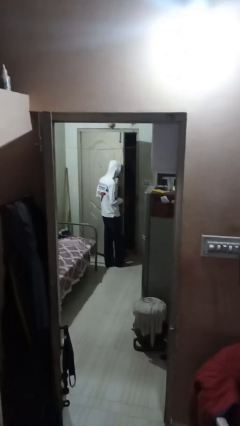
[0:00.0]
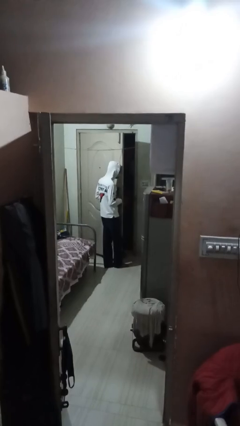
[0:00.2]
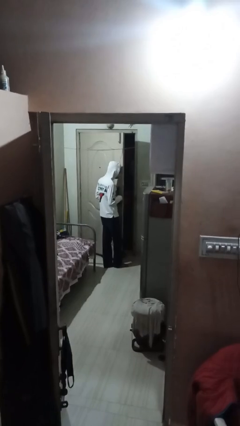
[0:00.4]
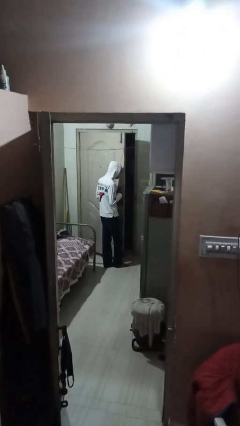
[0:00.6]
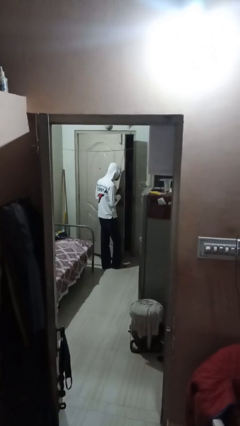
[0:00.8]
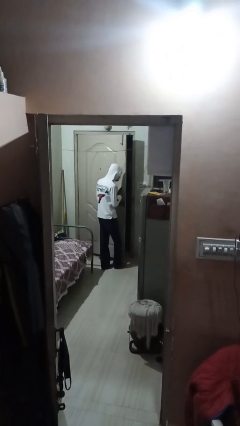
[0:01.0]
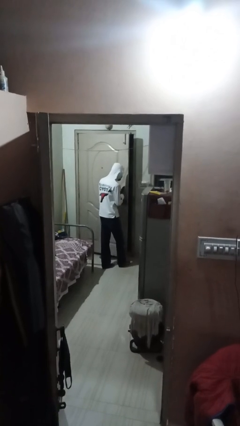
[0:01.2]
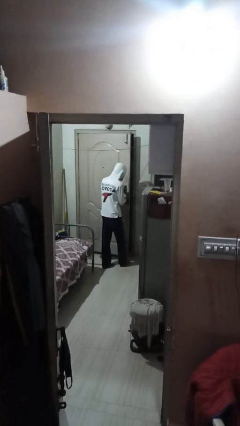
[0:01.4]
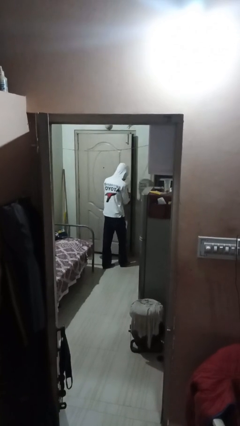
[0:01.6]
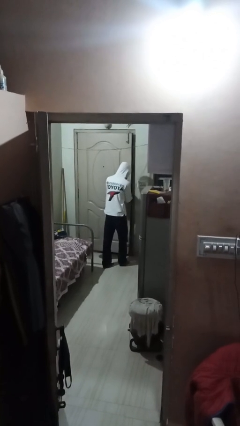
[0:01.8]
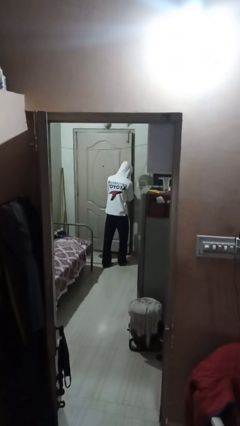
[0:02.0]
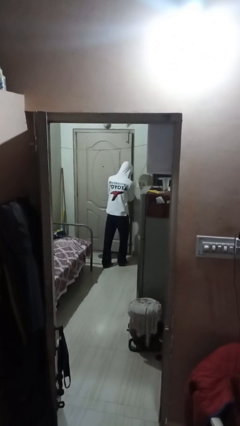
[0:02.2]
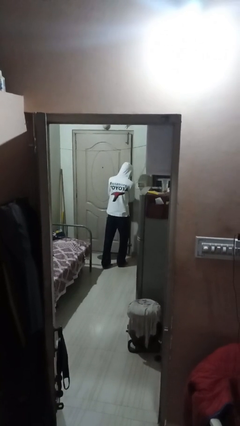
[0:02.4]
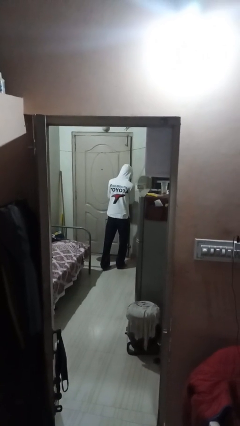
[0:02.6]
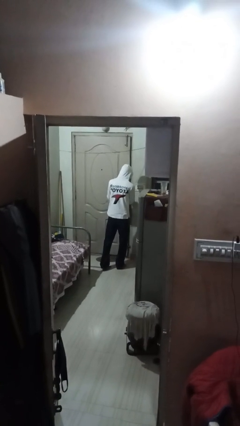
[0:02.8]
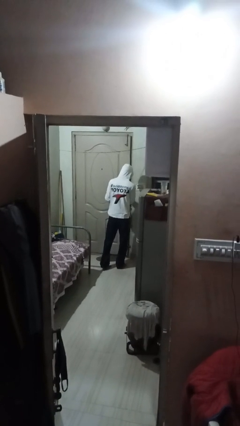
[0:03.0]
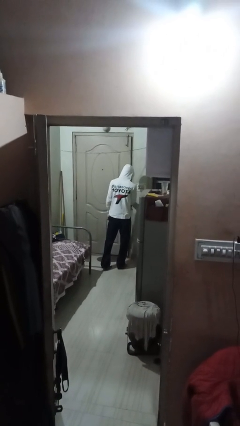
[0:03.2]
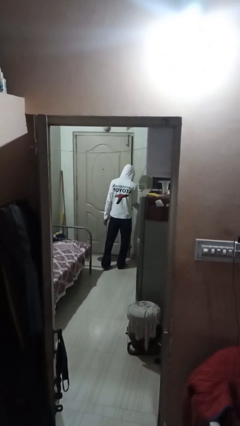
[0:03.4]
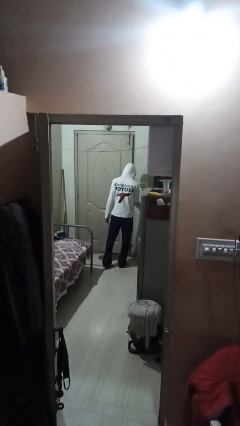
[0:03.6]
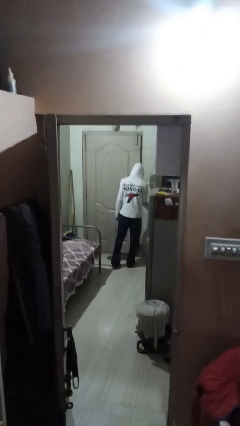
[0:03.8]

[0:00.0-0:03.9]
person closes facility door

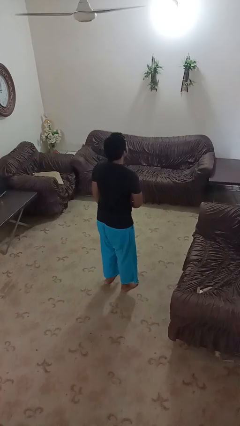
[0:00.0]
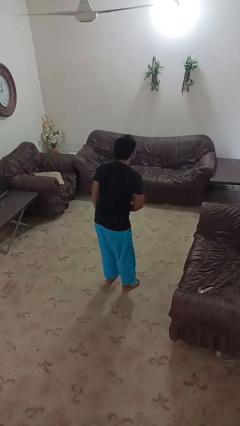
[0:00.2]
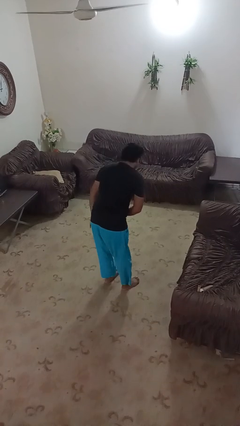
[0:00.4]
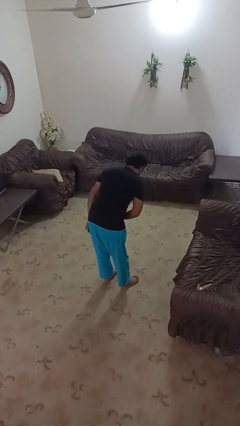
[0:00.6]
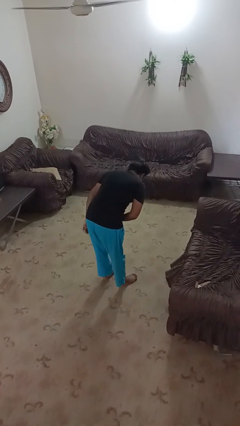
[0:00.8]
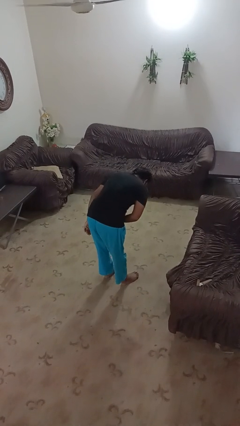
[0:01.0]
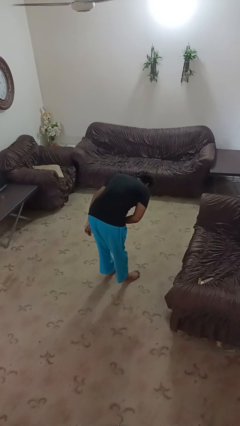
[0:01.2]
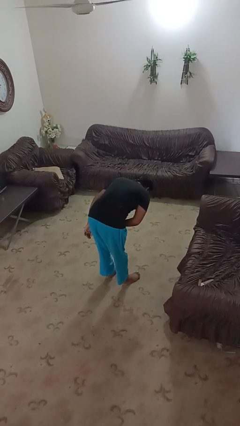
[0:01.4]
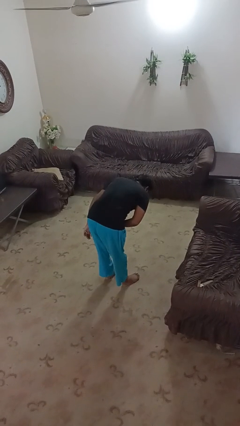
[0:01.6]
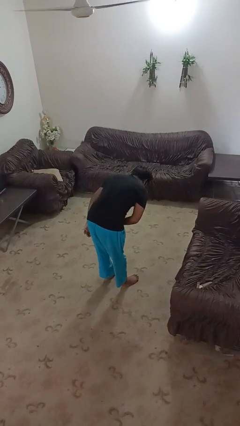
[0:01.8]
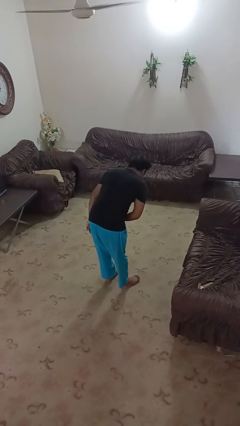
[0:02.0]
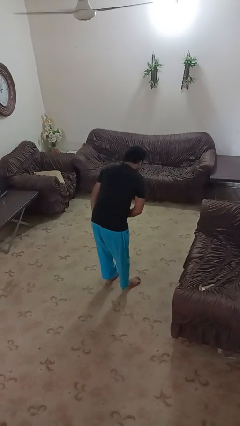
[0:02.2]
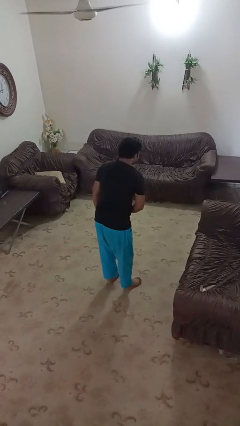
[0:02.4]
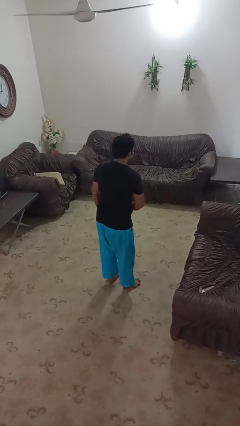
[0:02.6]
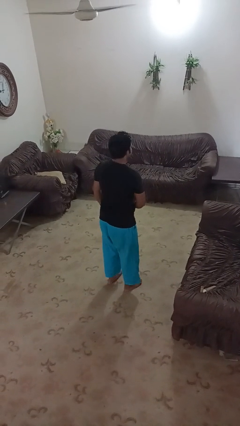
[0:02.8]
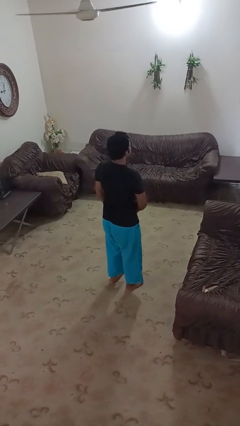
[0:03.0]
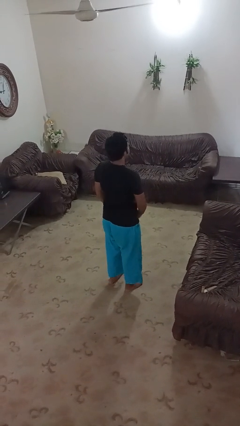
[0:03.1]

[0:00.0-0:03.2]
person bows

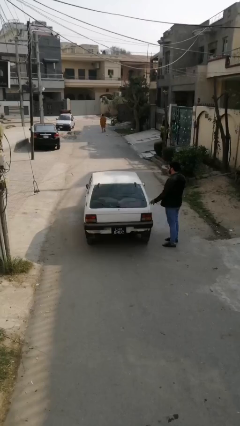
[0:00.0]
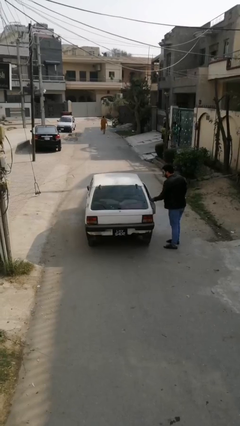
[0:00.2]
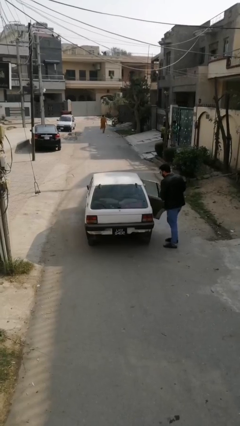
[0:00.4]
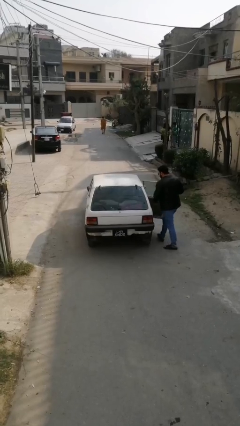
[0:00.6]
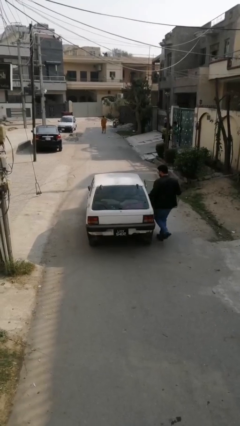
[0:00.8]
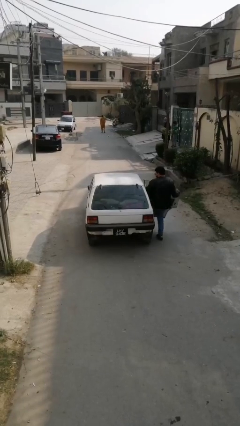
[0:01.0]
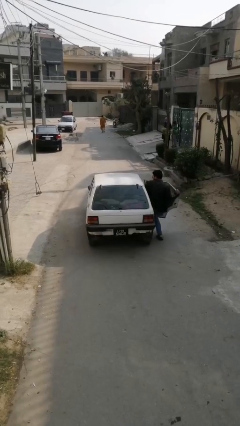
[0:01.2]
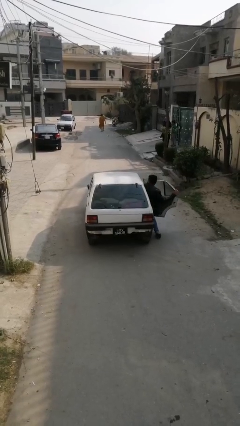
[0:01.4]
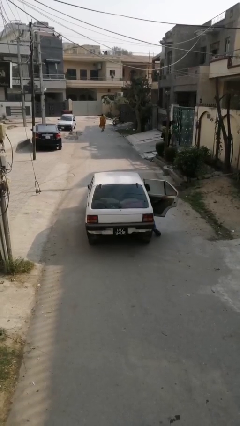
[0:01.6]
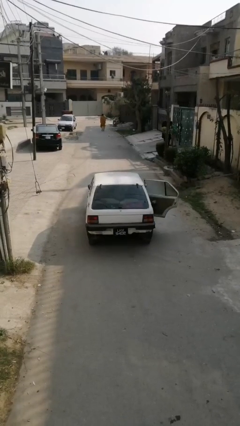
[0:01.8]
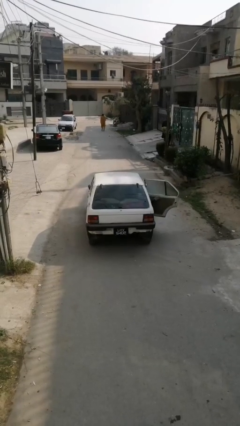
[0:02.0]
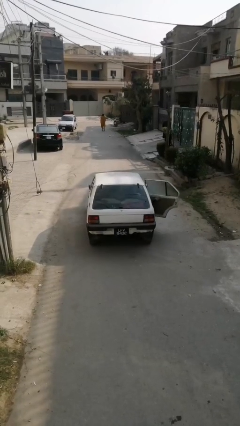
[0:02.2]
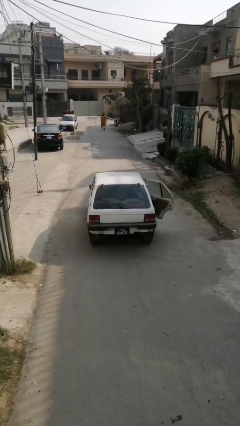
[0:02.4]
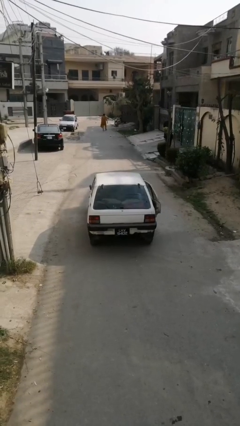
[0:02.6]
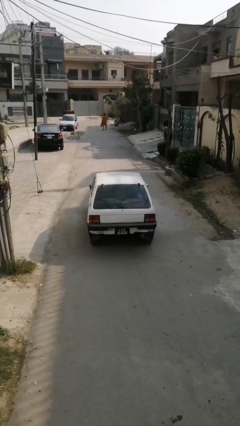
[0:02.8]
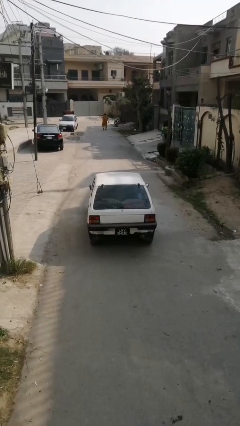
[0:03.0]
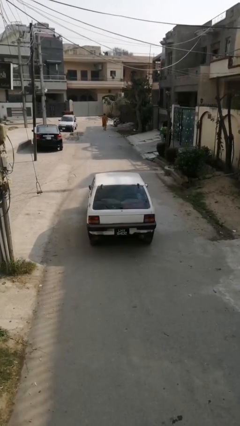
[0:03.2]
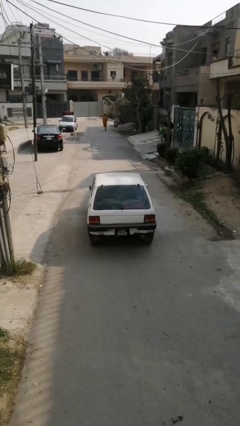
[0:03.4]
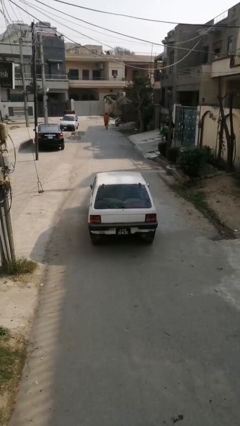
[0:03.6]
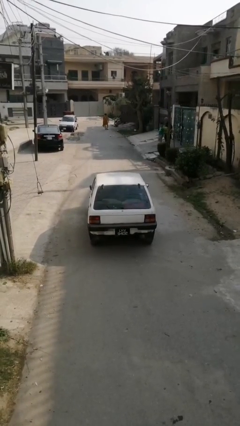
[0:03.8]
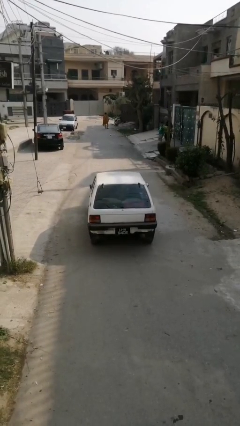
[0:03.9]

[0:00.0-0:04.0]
car picks up person

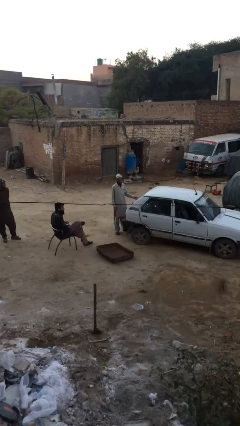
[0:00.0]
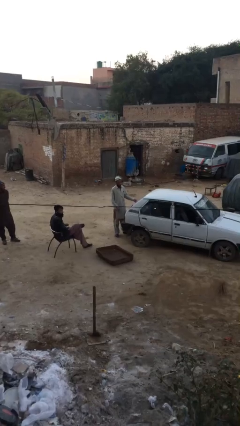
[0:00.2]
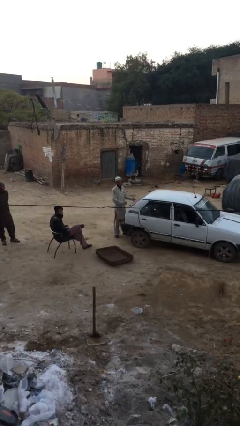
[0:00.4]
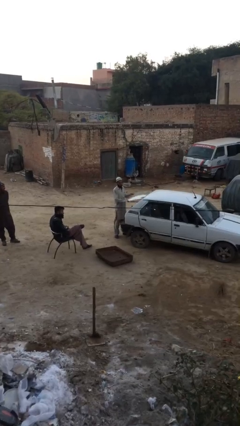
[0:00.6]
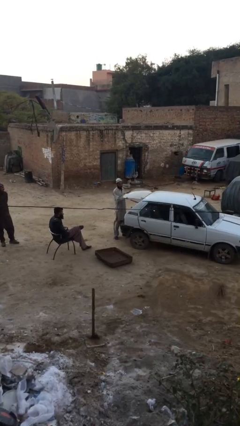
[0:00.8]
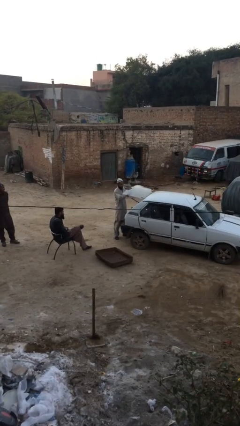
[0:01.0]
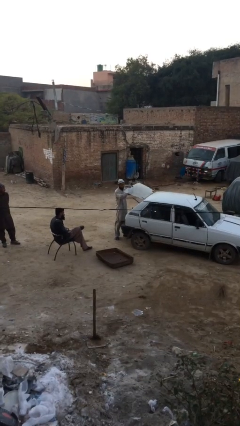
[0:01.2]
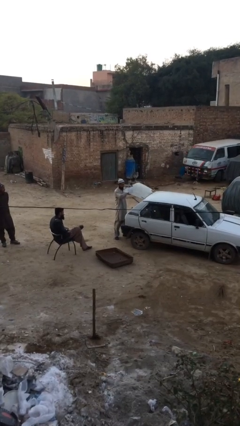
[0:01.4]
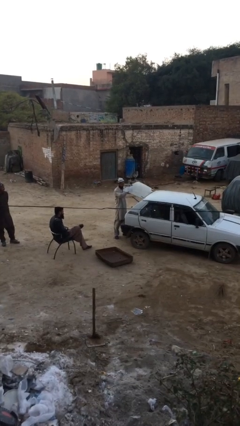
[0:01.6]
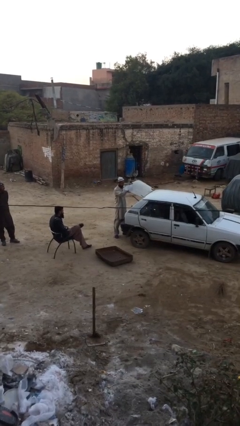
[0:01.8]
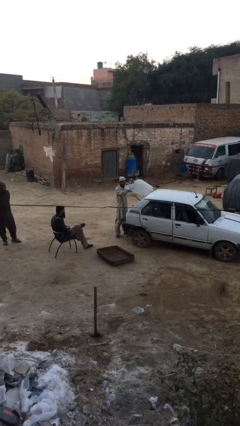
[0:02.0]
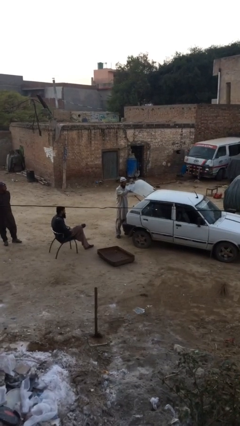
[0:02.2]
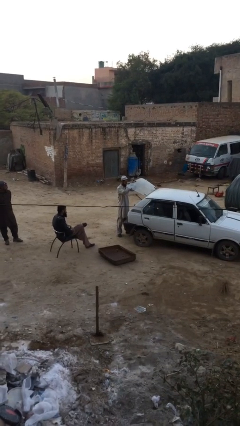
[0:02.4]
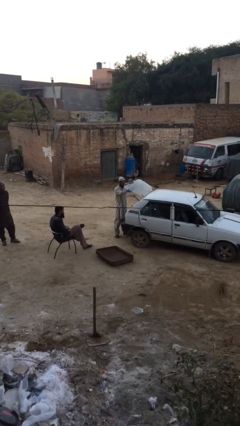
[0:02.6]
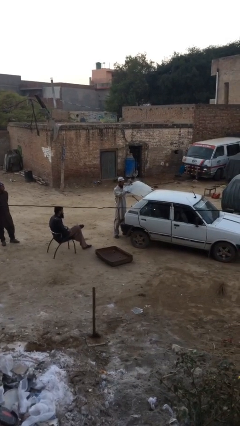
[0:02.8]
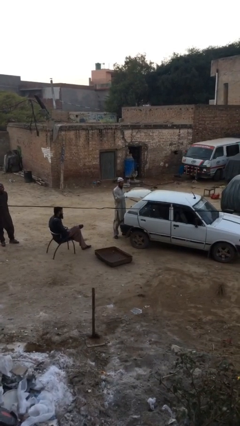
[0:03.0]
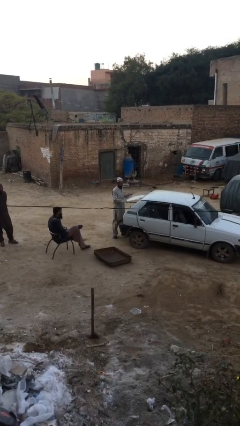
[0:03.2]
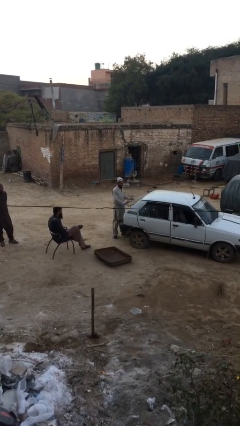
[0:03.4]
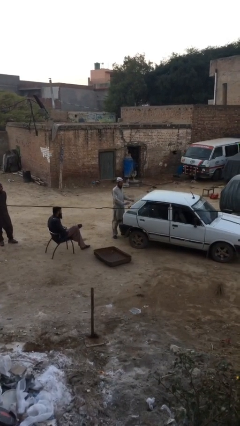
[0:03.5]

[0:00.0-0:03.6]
person opens car trunk

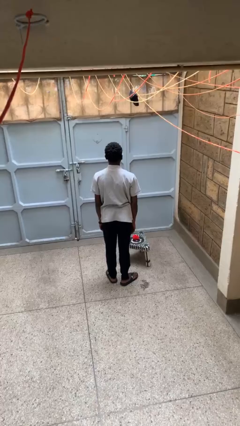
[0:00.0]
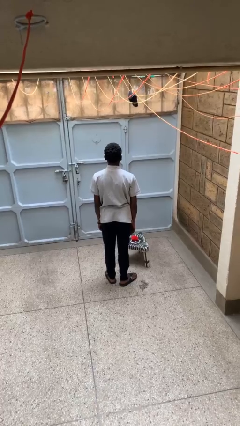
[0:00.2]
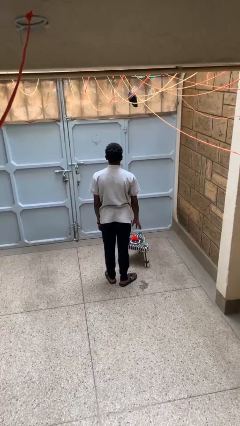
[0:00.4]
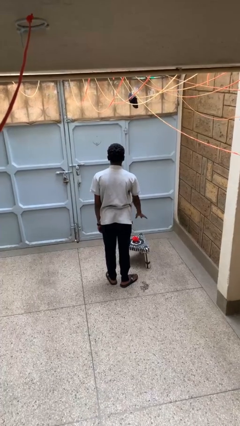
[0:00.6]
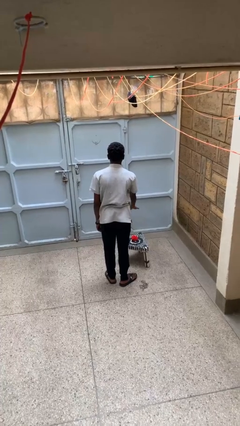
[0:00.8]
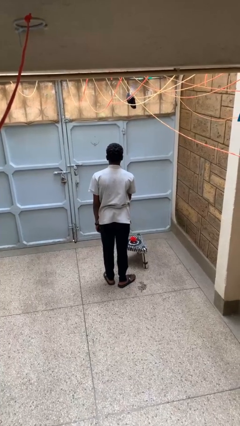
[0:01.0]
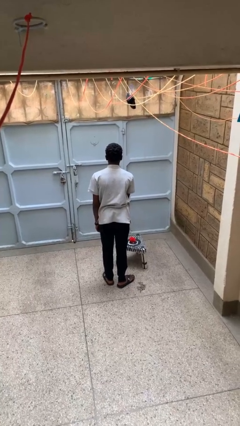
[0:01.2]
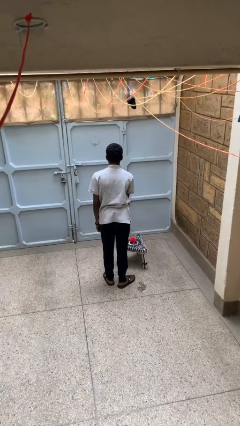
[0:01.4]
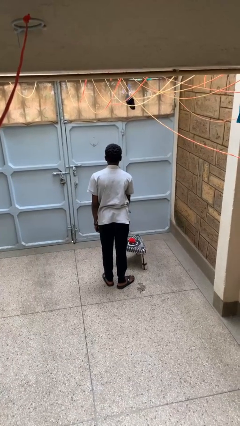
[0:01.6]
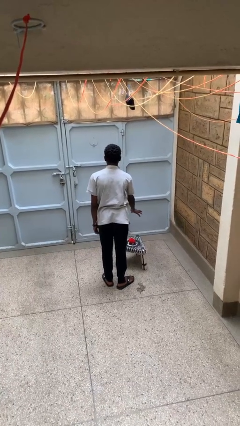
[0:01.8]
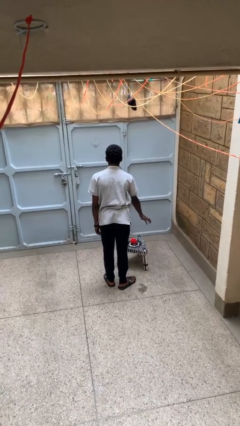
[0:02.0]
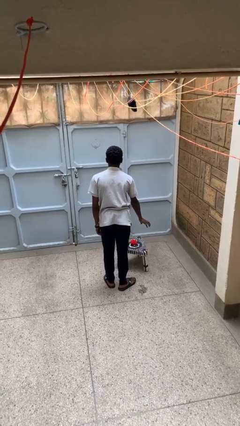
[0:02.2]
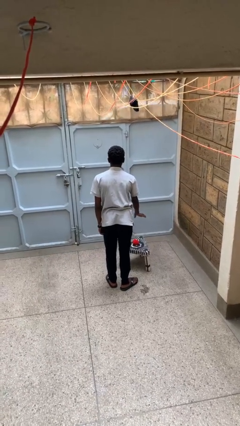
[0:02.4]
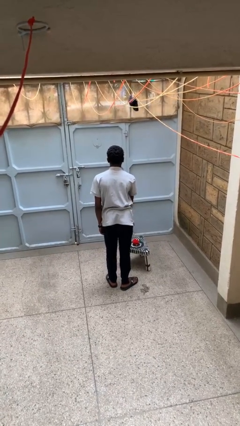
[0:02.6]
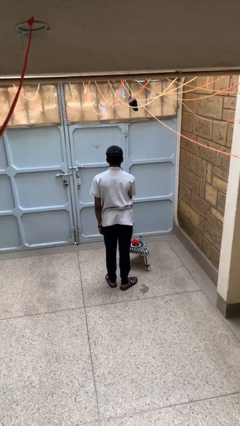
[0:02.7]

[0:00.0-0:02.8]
person waves hand over object

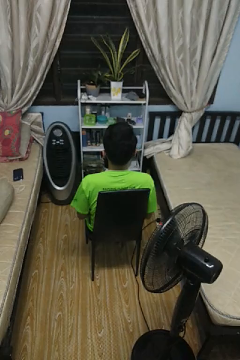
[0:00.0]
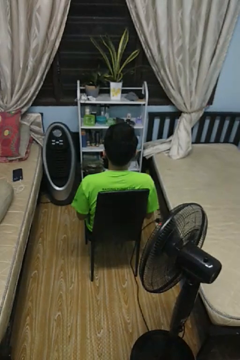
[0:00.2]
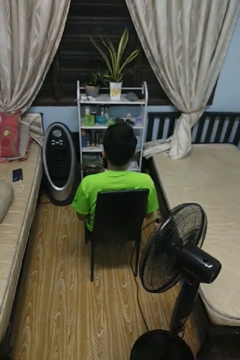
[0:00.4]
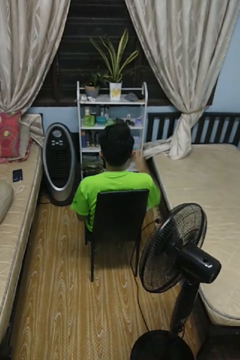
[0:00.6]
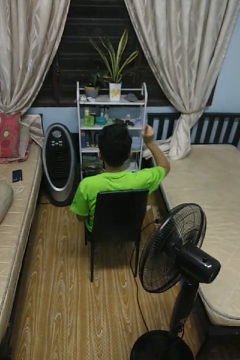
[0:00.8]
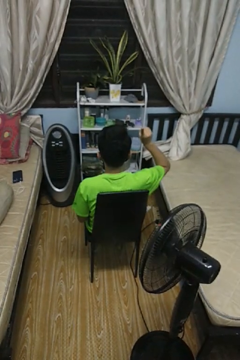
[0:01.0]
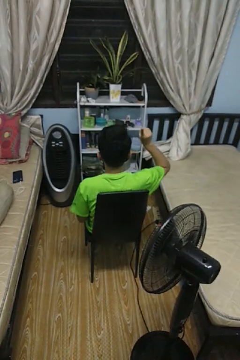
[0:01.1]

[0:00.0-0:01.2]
person gestures number one
